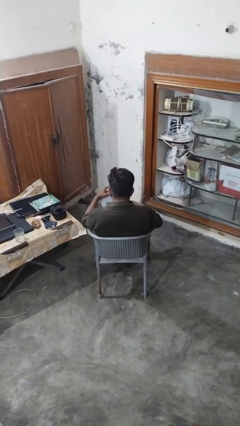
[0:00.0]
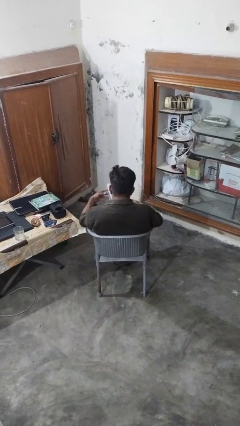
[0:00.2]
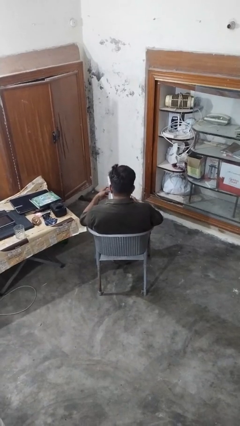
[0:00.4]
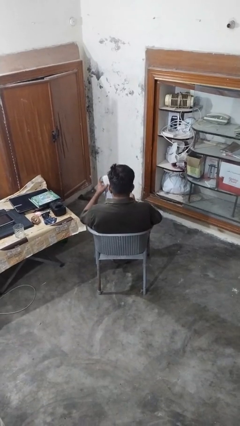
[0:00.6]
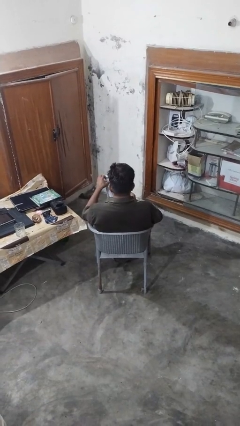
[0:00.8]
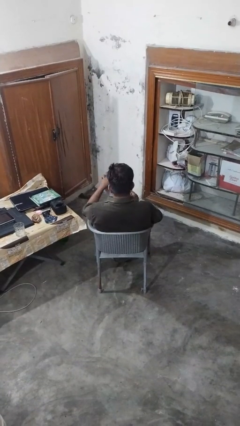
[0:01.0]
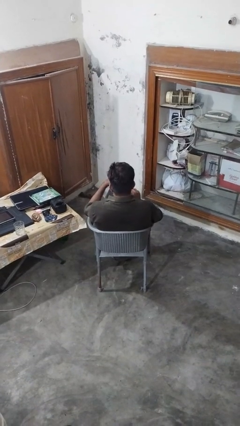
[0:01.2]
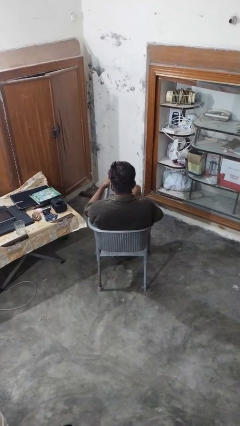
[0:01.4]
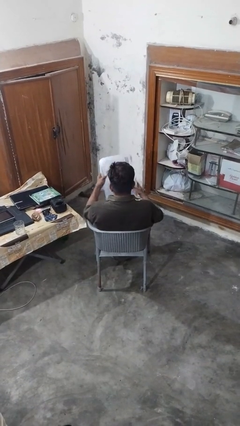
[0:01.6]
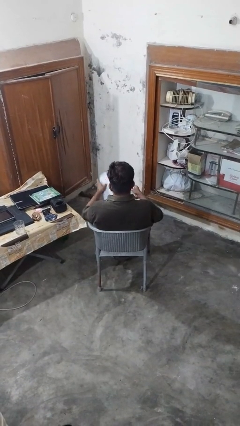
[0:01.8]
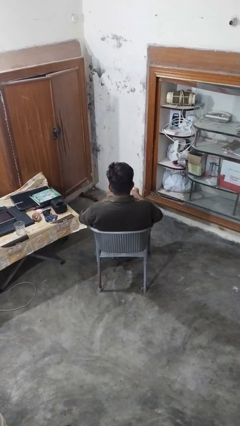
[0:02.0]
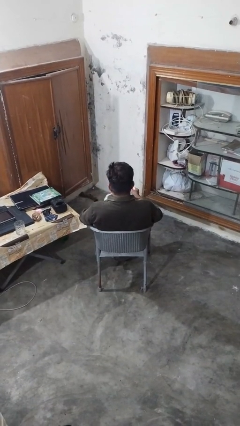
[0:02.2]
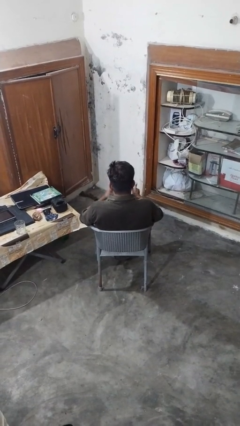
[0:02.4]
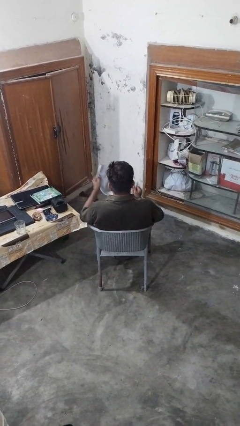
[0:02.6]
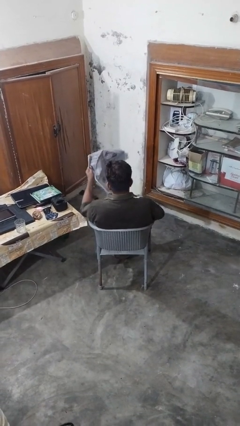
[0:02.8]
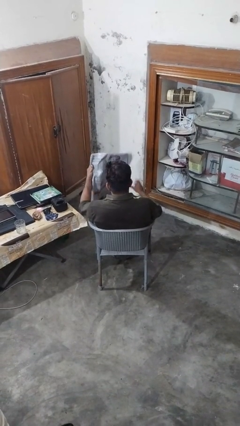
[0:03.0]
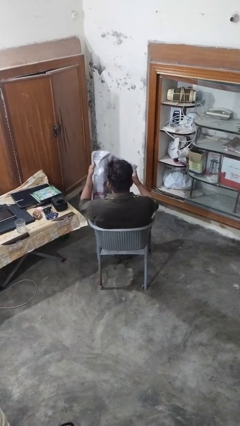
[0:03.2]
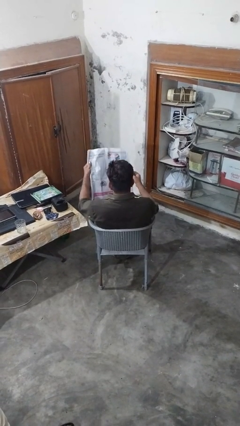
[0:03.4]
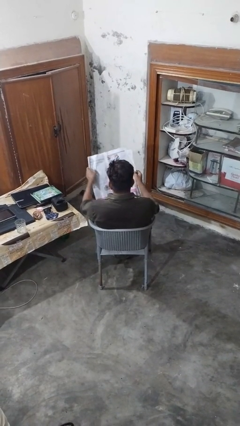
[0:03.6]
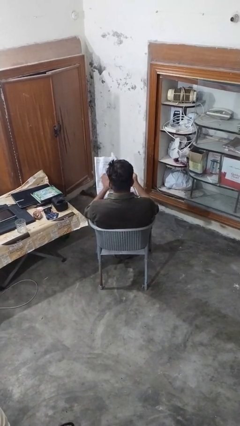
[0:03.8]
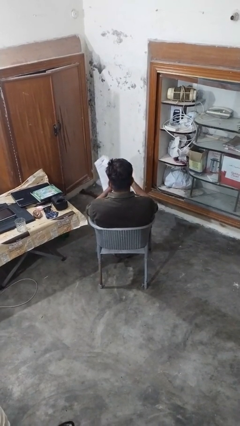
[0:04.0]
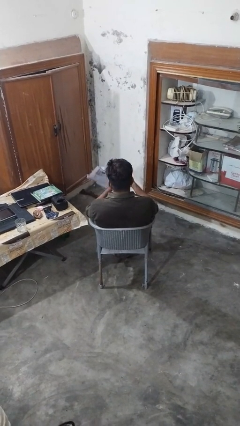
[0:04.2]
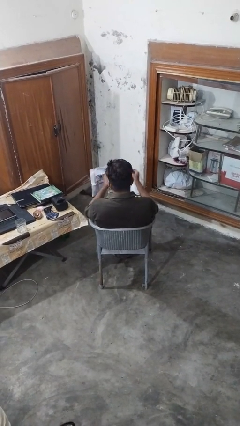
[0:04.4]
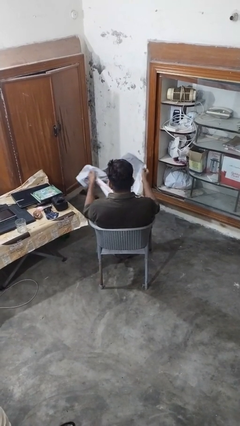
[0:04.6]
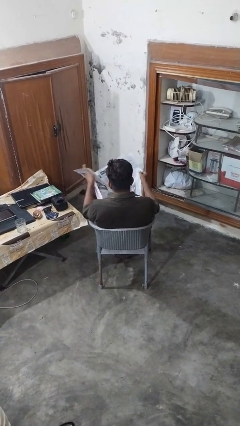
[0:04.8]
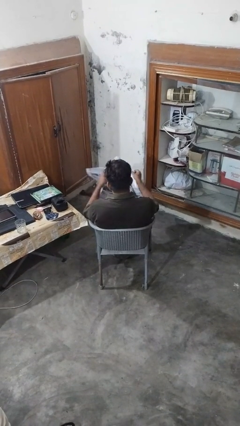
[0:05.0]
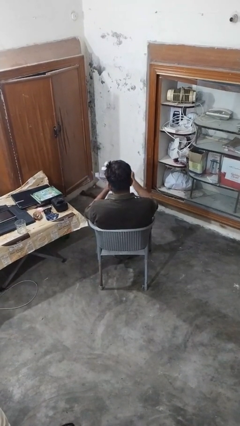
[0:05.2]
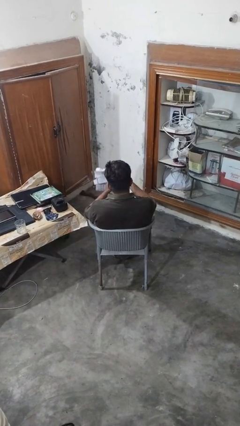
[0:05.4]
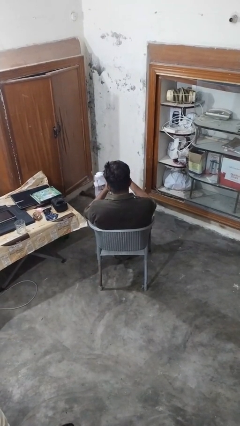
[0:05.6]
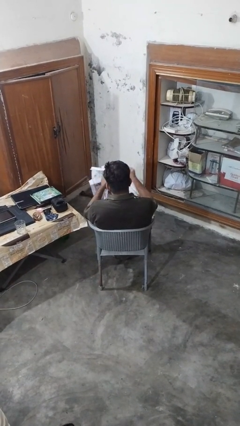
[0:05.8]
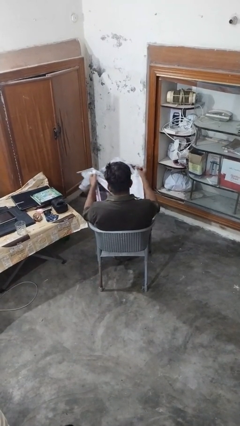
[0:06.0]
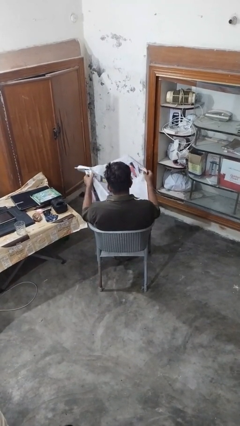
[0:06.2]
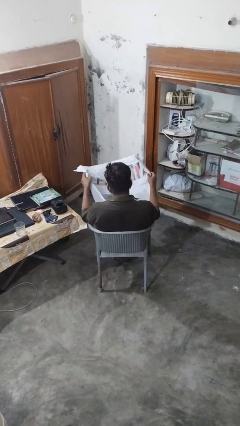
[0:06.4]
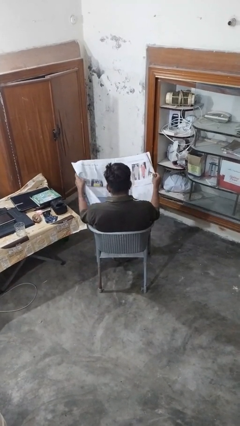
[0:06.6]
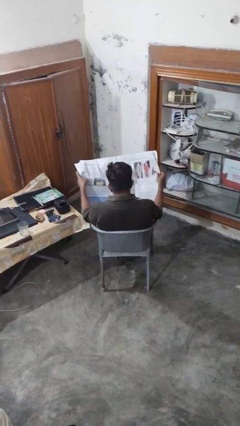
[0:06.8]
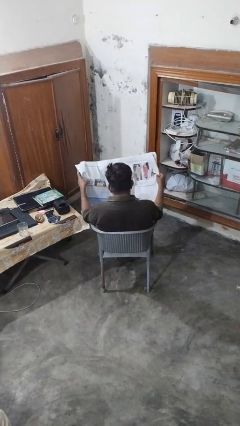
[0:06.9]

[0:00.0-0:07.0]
person reads newspaper

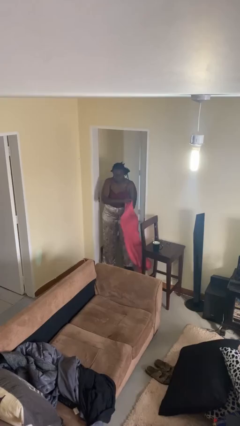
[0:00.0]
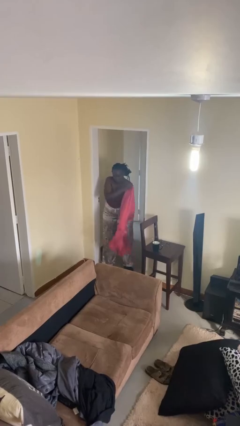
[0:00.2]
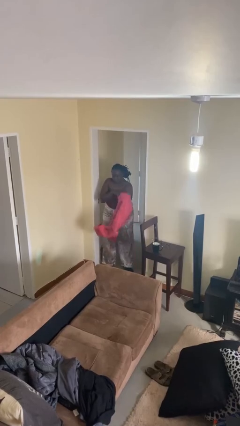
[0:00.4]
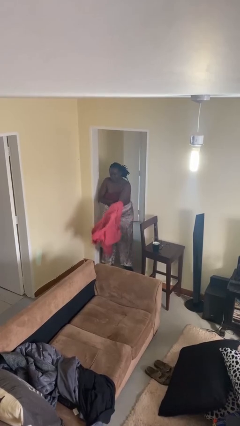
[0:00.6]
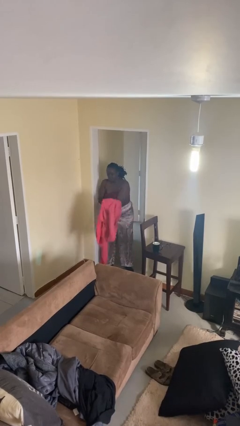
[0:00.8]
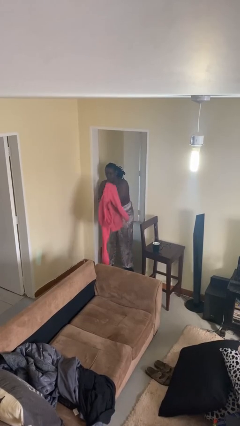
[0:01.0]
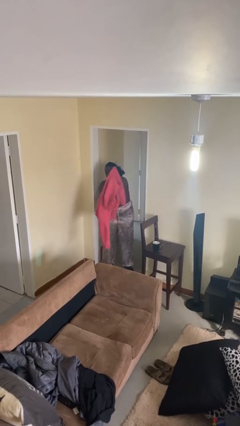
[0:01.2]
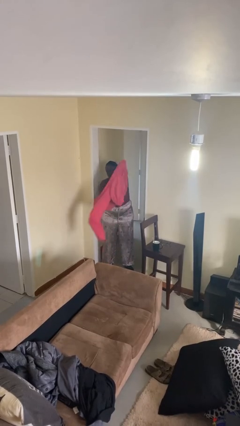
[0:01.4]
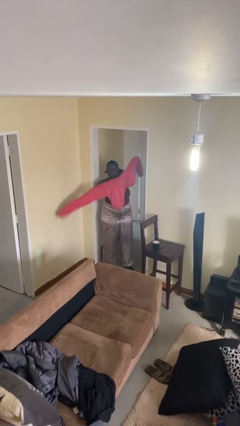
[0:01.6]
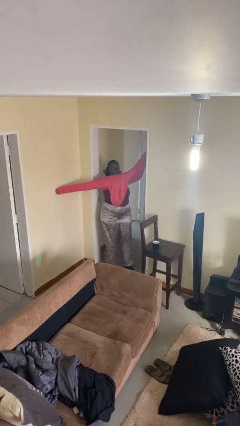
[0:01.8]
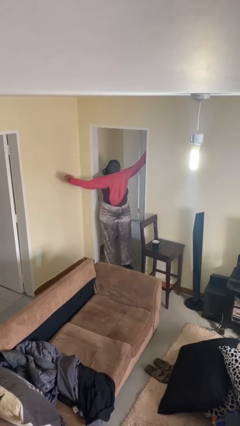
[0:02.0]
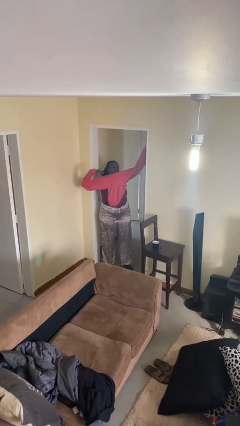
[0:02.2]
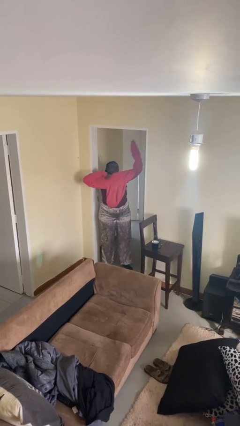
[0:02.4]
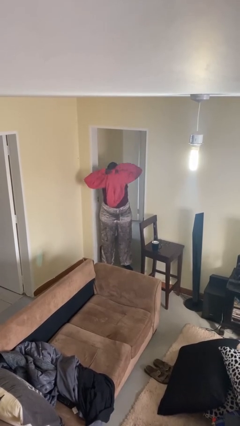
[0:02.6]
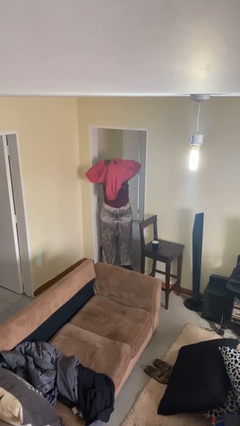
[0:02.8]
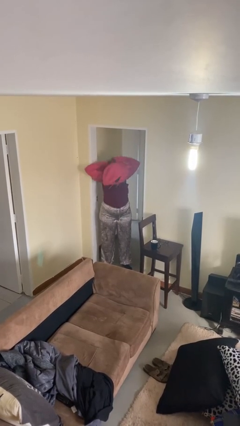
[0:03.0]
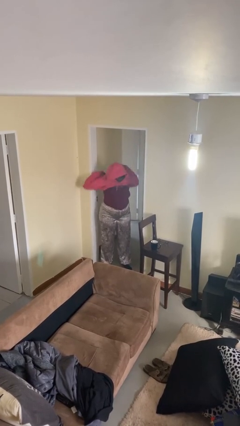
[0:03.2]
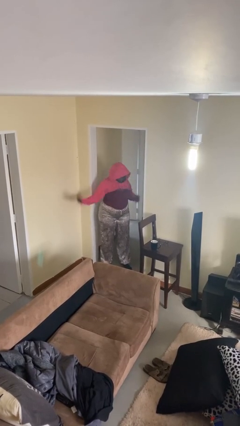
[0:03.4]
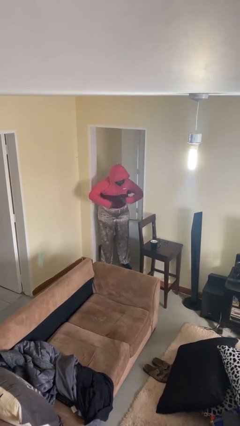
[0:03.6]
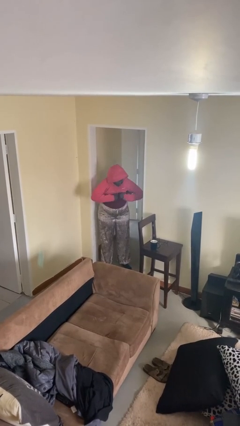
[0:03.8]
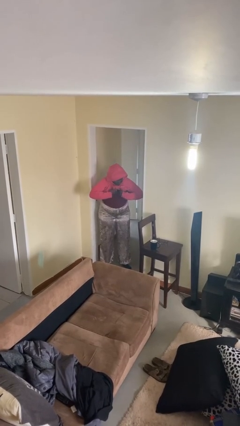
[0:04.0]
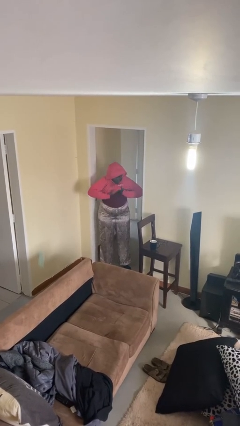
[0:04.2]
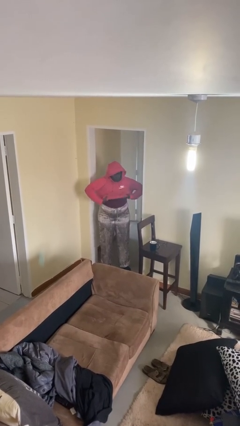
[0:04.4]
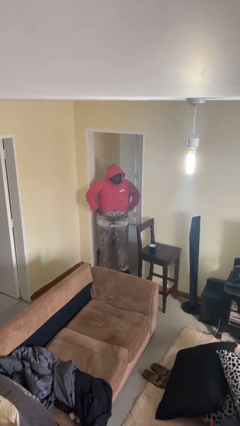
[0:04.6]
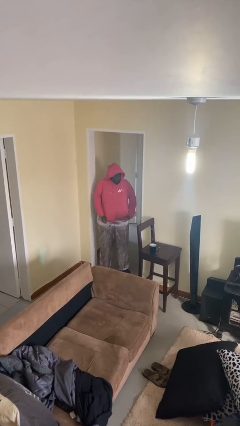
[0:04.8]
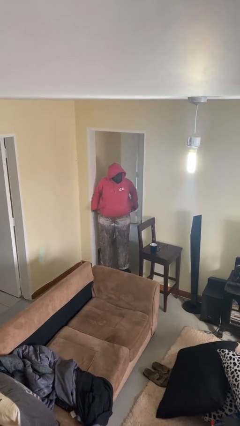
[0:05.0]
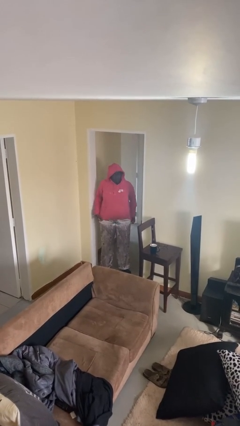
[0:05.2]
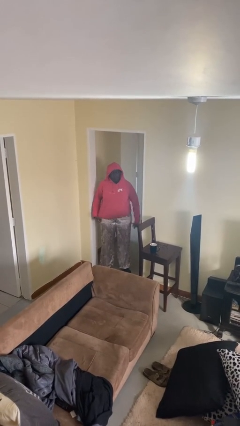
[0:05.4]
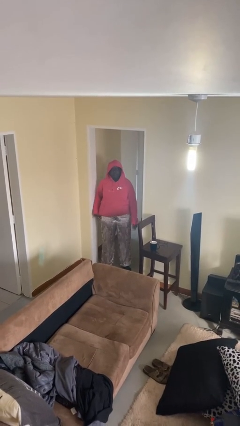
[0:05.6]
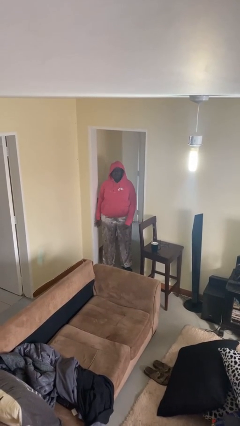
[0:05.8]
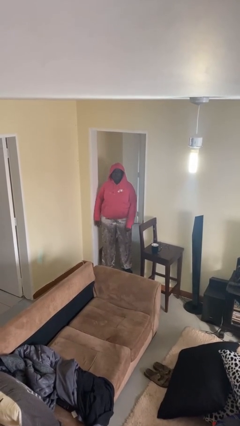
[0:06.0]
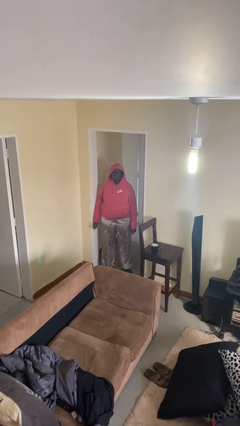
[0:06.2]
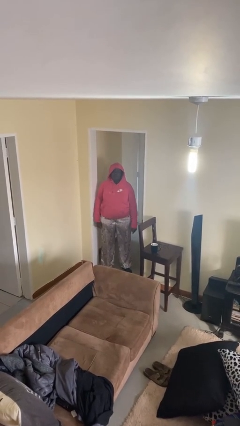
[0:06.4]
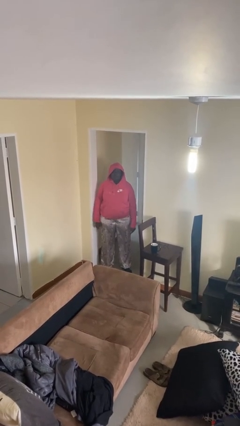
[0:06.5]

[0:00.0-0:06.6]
person puts on hoodie

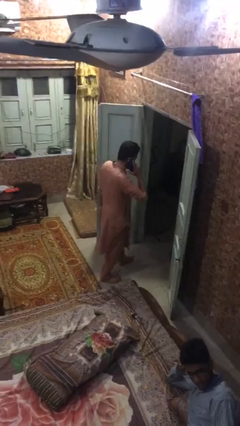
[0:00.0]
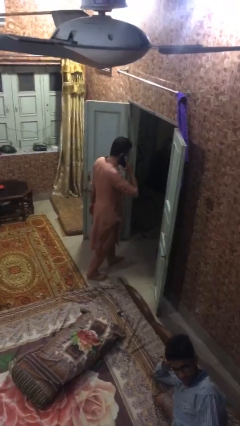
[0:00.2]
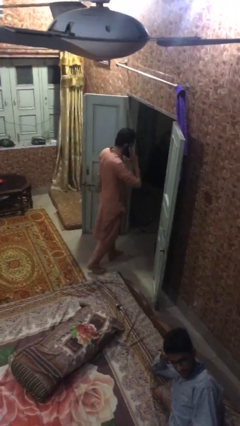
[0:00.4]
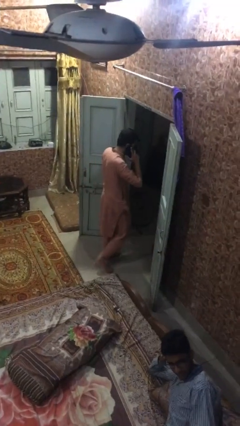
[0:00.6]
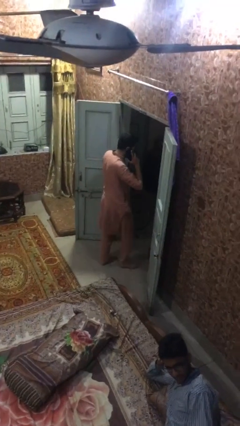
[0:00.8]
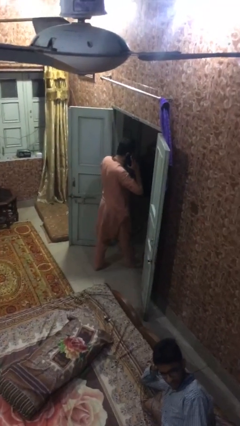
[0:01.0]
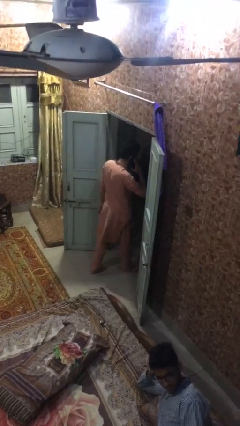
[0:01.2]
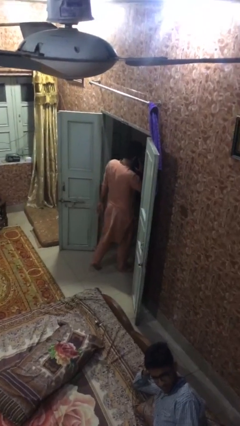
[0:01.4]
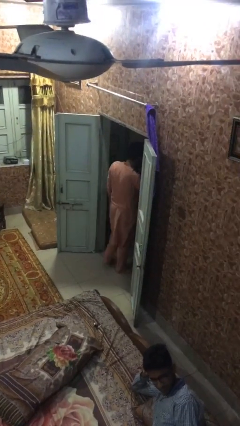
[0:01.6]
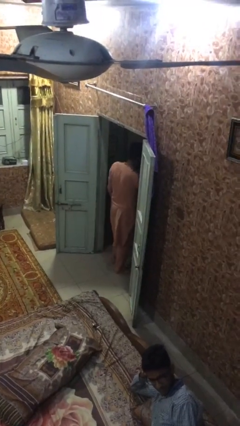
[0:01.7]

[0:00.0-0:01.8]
person exits scene through structure

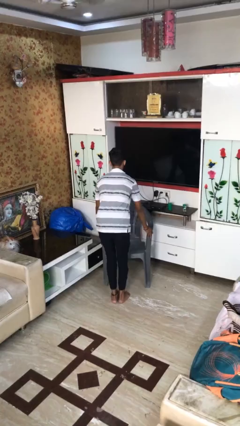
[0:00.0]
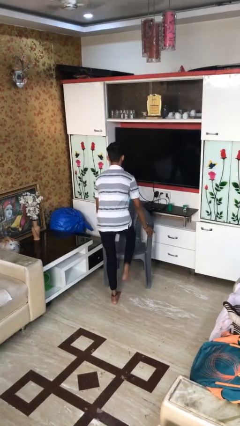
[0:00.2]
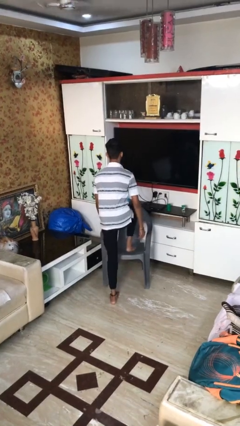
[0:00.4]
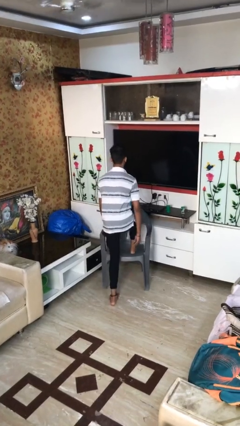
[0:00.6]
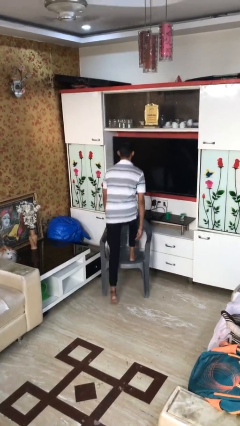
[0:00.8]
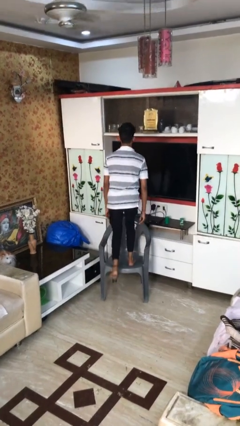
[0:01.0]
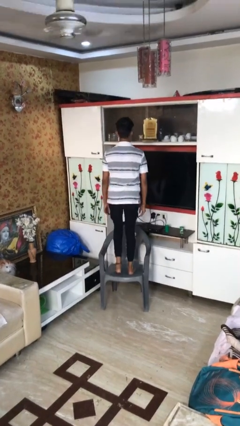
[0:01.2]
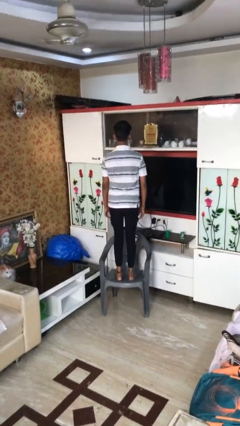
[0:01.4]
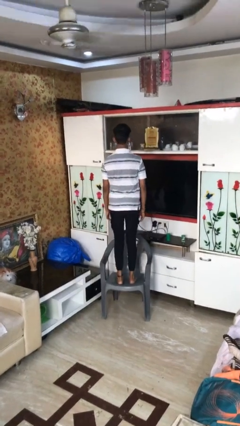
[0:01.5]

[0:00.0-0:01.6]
person climbs on chair

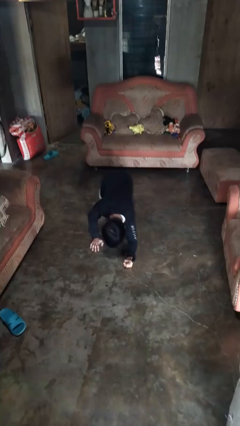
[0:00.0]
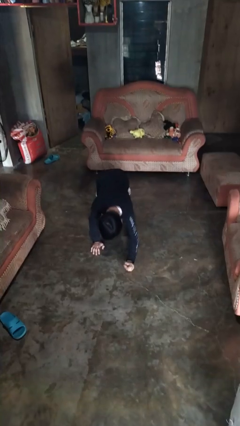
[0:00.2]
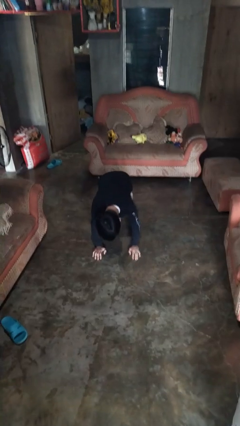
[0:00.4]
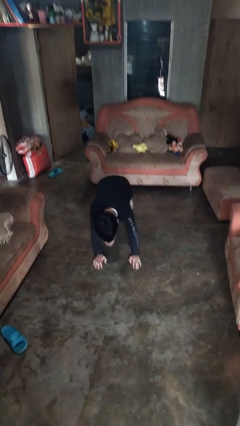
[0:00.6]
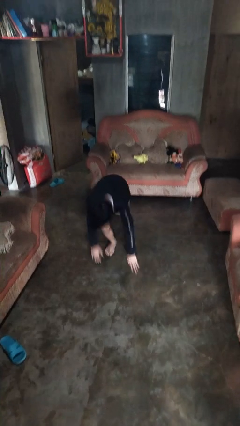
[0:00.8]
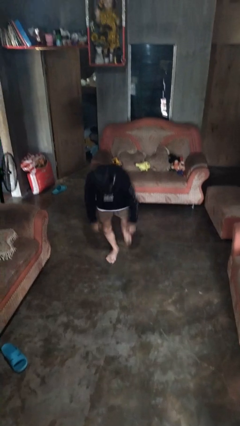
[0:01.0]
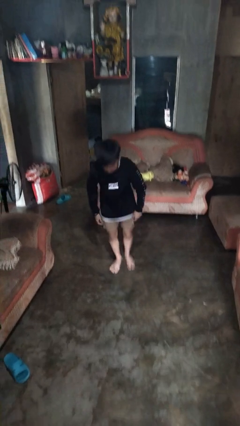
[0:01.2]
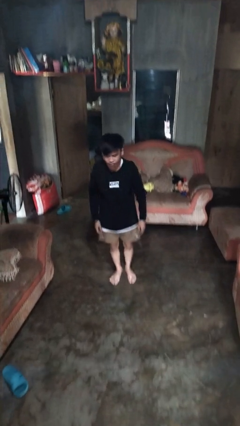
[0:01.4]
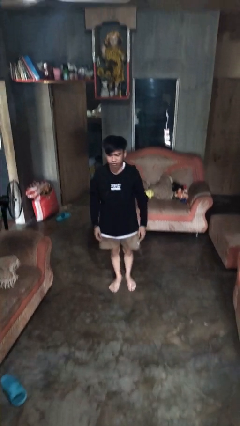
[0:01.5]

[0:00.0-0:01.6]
person stands up from floor
